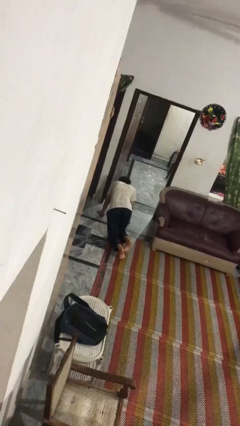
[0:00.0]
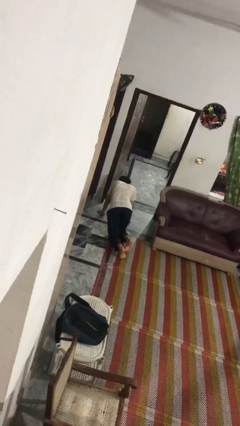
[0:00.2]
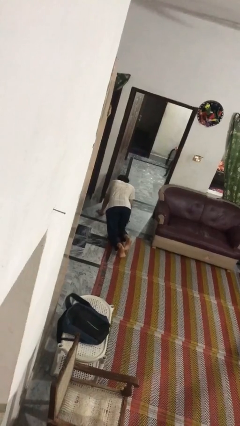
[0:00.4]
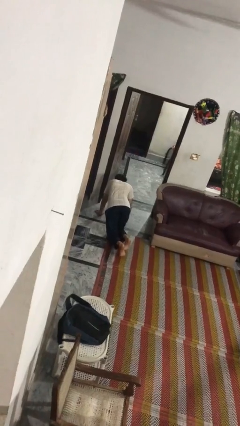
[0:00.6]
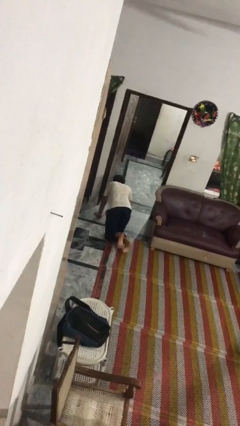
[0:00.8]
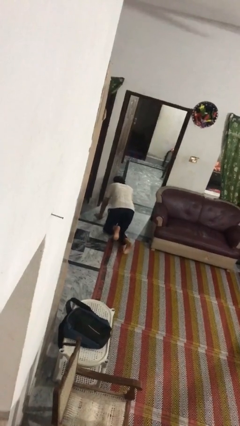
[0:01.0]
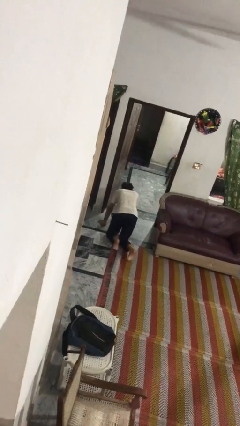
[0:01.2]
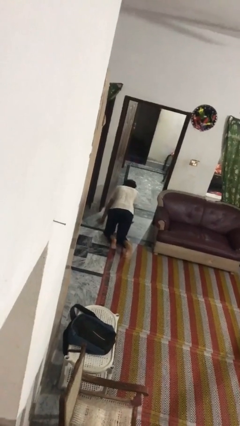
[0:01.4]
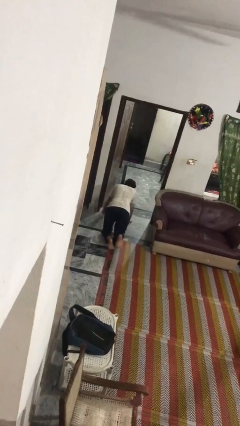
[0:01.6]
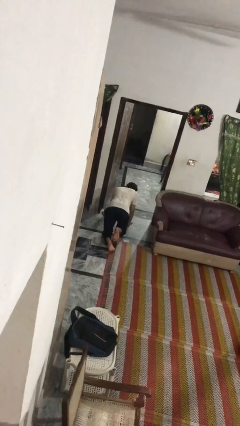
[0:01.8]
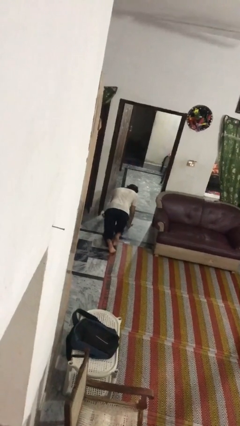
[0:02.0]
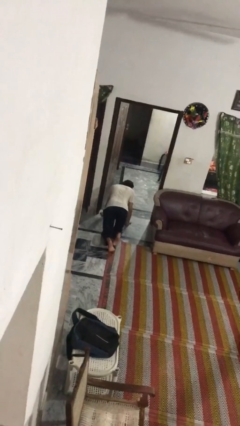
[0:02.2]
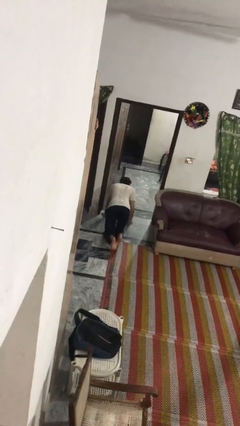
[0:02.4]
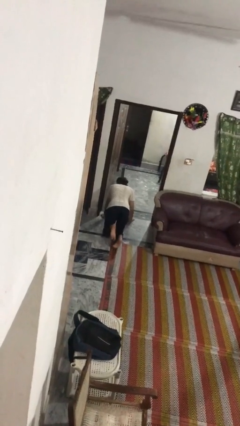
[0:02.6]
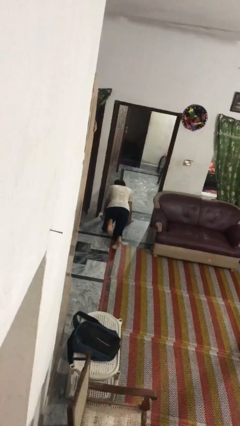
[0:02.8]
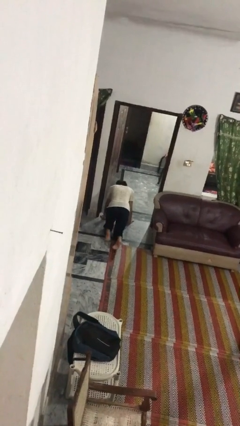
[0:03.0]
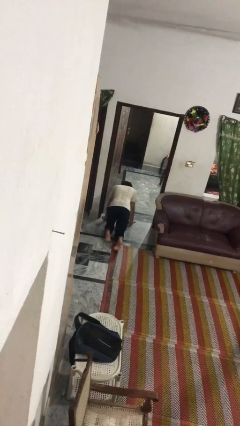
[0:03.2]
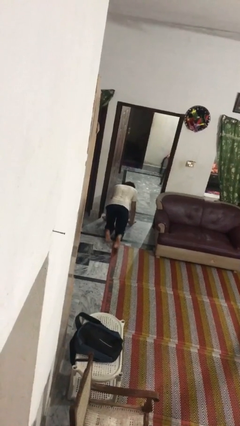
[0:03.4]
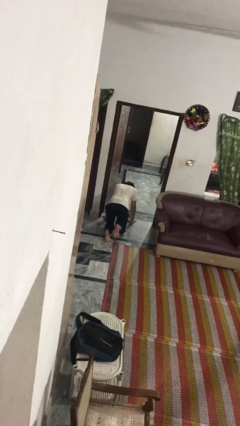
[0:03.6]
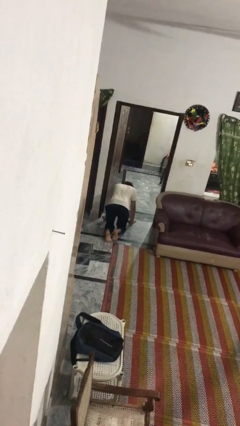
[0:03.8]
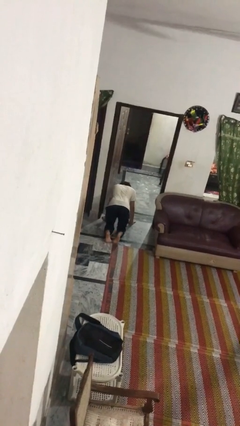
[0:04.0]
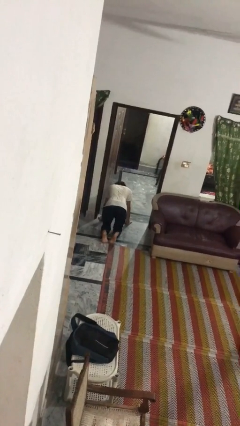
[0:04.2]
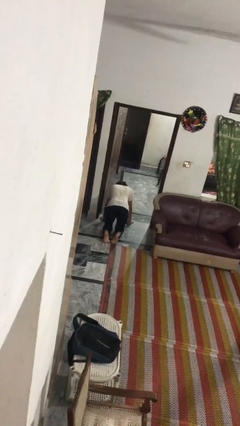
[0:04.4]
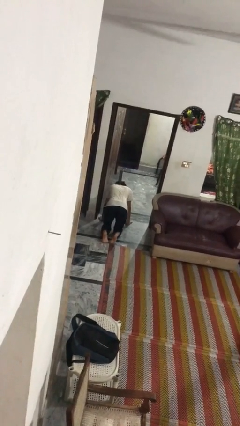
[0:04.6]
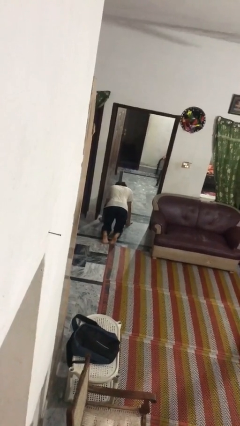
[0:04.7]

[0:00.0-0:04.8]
person crawls

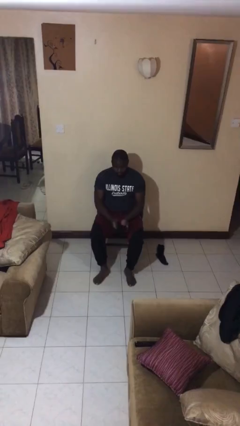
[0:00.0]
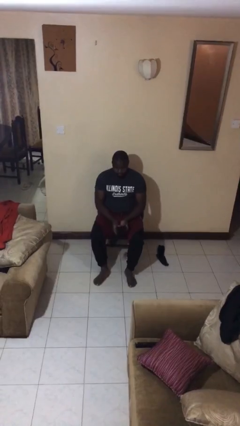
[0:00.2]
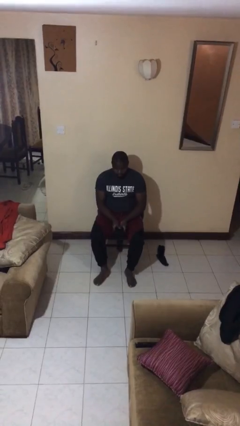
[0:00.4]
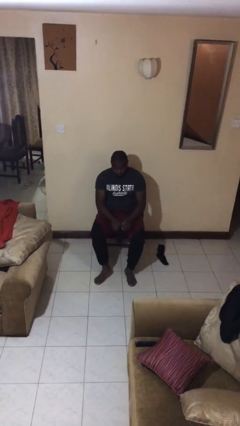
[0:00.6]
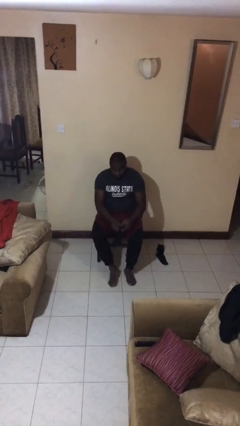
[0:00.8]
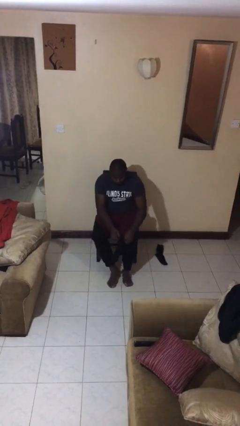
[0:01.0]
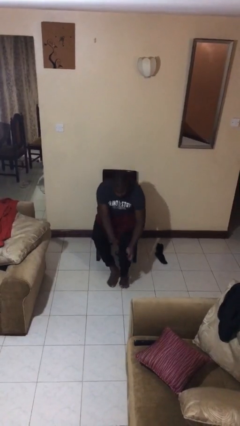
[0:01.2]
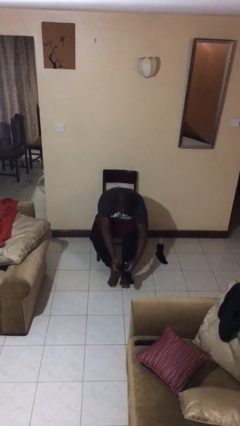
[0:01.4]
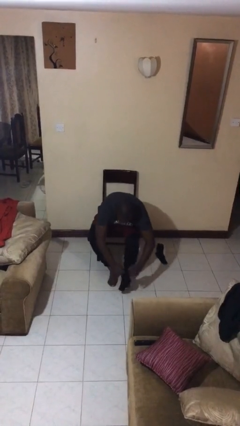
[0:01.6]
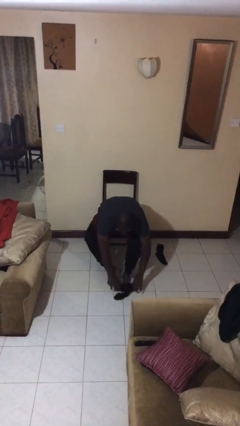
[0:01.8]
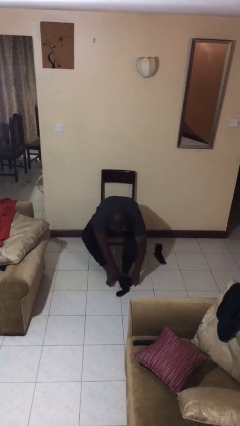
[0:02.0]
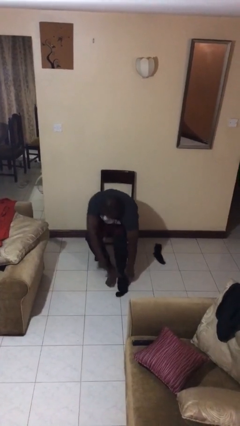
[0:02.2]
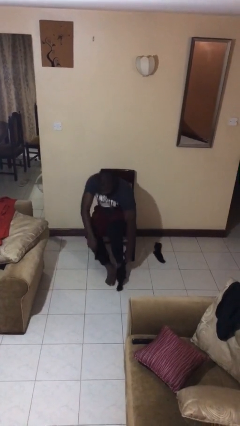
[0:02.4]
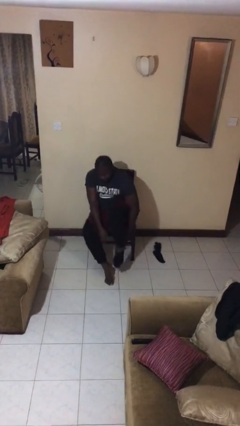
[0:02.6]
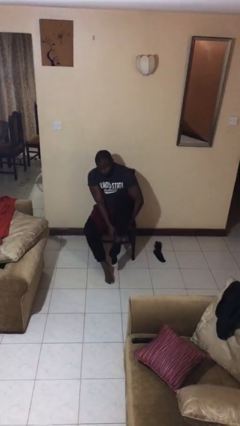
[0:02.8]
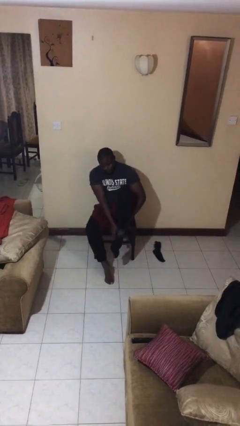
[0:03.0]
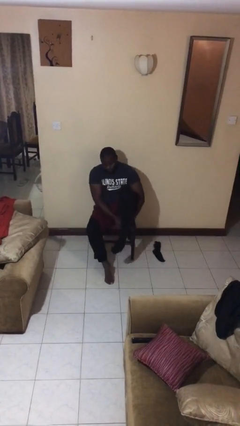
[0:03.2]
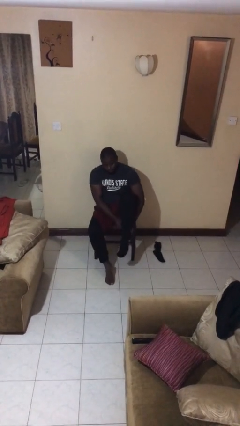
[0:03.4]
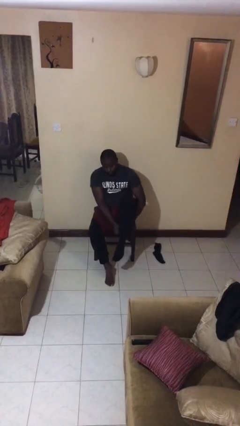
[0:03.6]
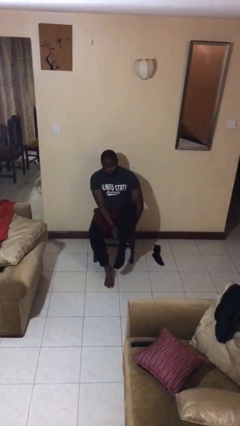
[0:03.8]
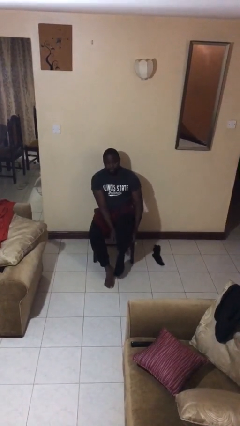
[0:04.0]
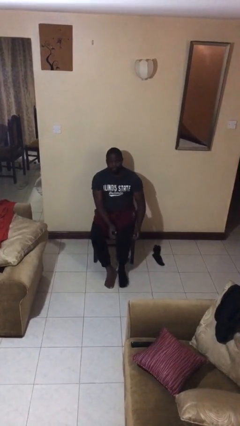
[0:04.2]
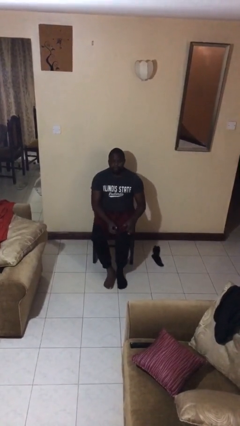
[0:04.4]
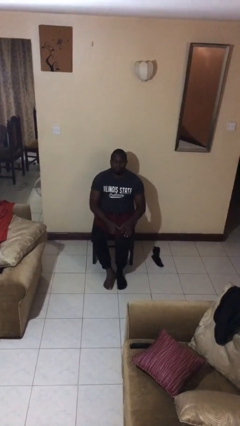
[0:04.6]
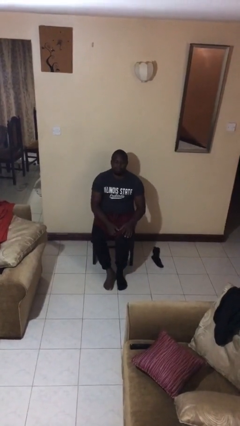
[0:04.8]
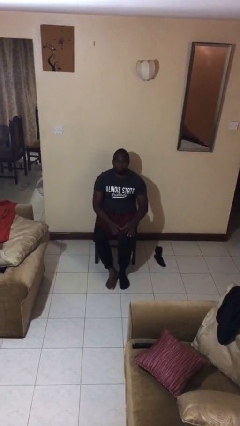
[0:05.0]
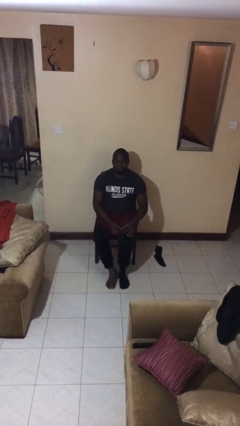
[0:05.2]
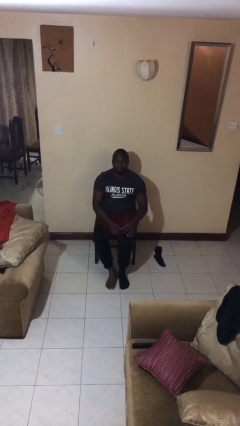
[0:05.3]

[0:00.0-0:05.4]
person puts on socks

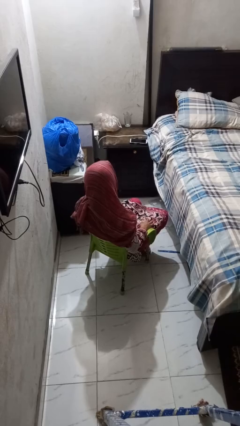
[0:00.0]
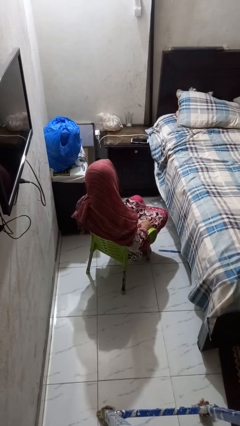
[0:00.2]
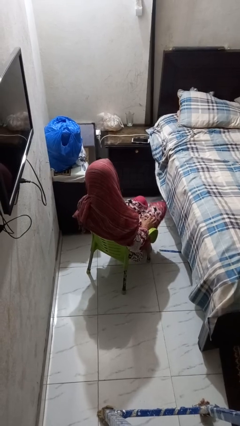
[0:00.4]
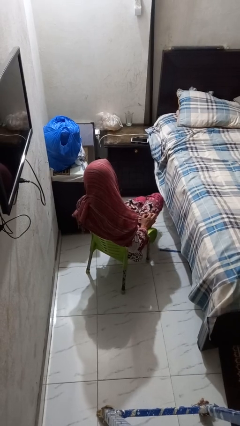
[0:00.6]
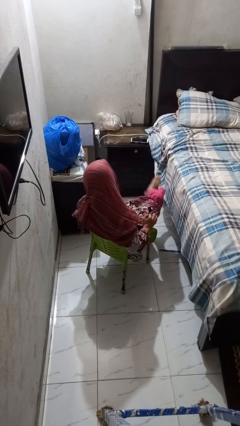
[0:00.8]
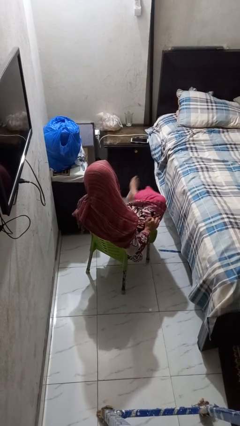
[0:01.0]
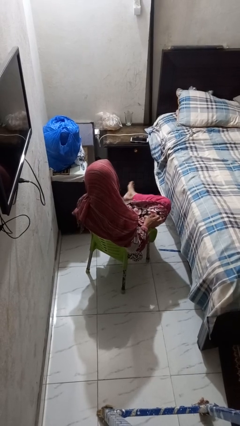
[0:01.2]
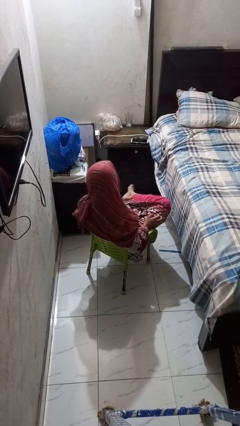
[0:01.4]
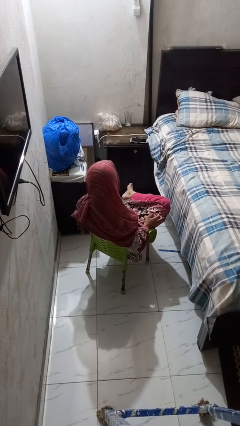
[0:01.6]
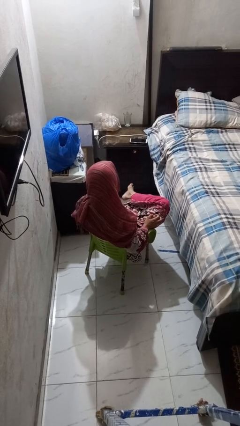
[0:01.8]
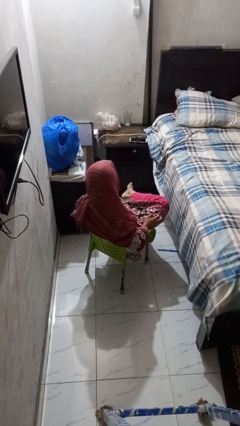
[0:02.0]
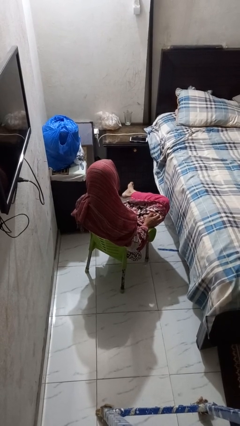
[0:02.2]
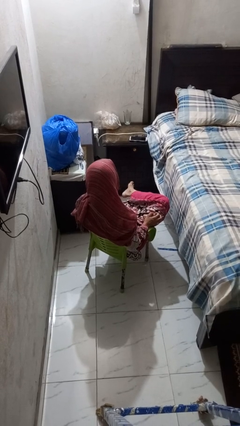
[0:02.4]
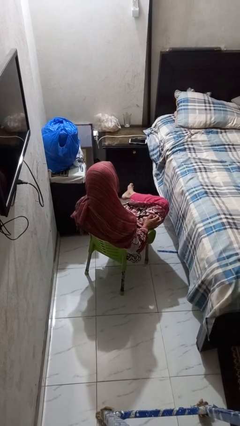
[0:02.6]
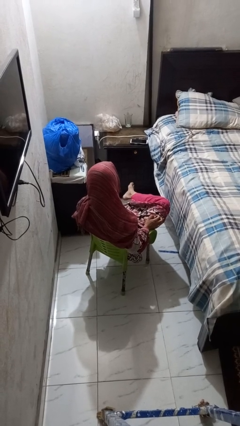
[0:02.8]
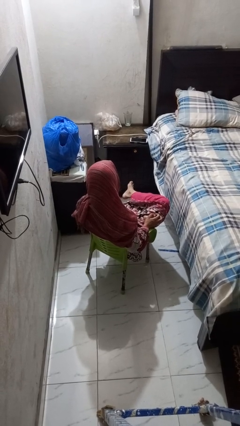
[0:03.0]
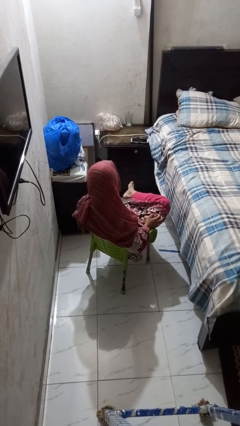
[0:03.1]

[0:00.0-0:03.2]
person crosses legs

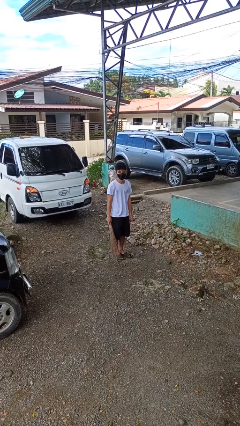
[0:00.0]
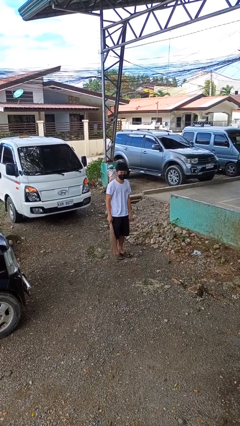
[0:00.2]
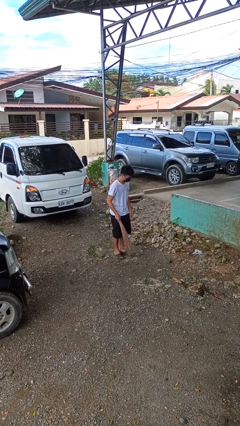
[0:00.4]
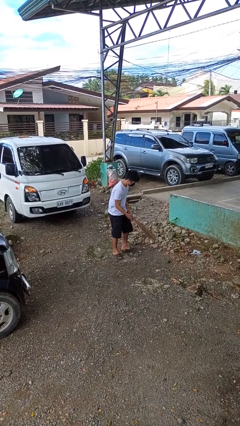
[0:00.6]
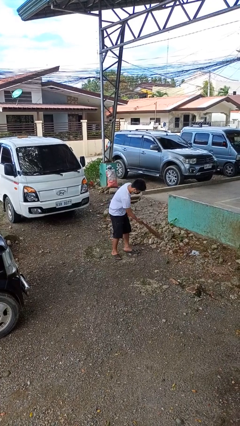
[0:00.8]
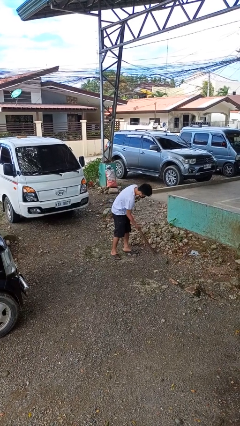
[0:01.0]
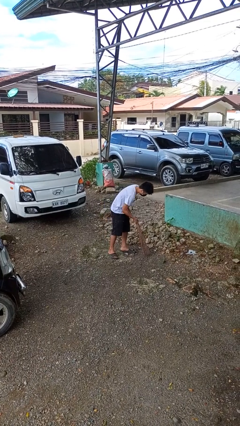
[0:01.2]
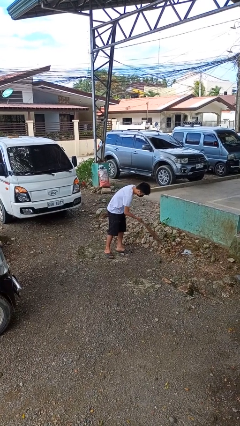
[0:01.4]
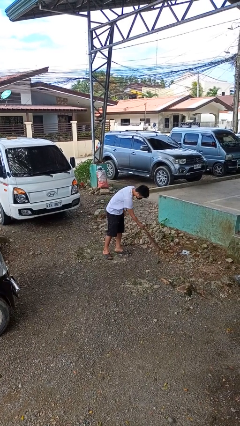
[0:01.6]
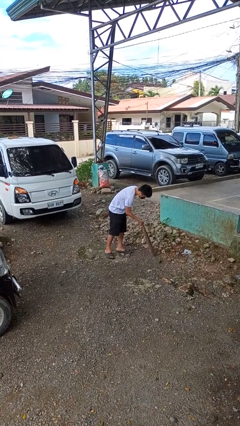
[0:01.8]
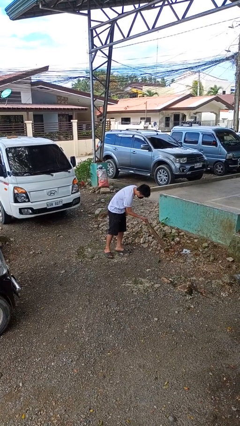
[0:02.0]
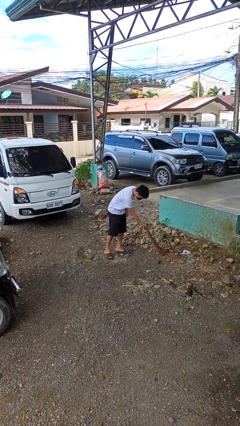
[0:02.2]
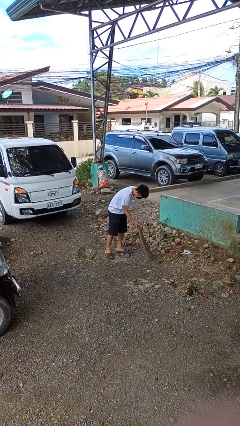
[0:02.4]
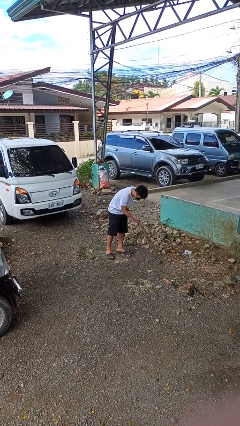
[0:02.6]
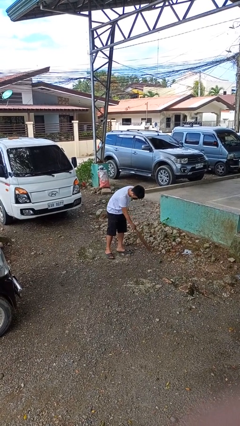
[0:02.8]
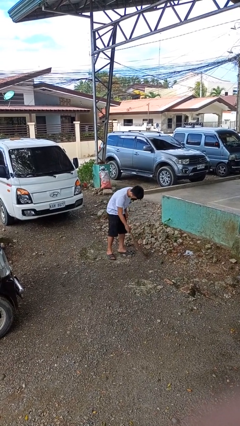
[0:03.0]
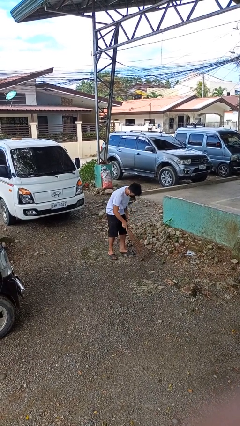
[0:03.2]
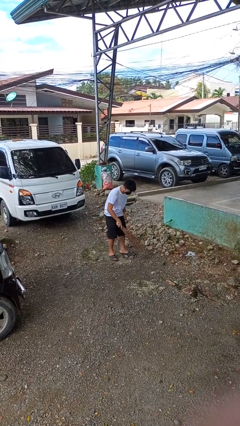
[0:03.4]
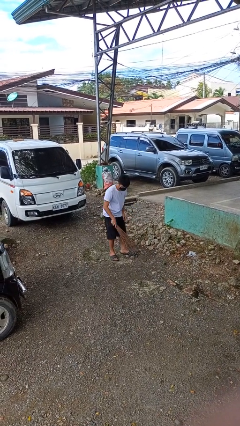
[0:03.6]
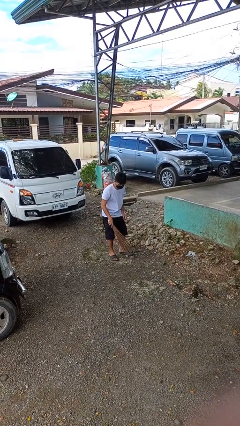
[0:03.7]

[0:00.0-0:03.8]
person sweeps floor

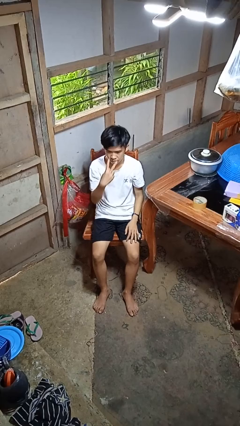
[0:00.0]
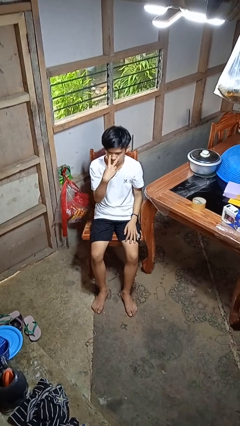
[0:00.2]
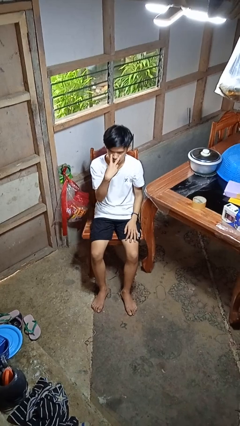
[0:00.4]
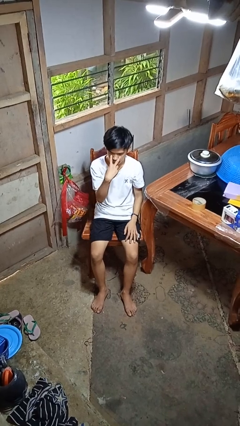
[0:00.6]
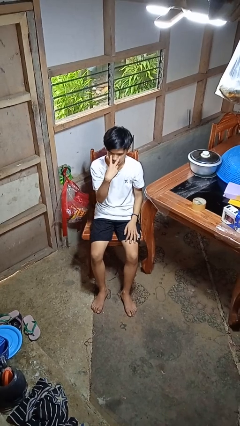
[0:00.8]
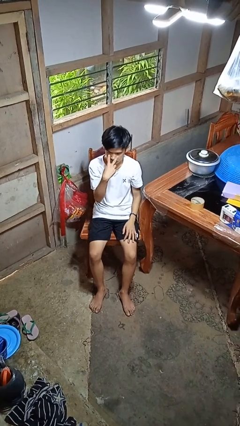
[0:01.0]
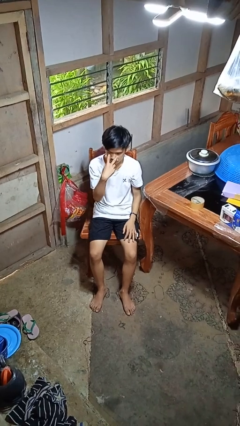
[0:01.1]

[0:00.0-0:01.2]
person gestures watch closely
